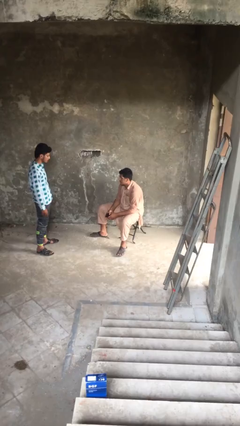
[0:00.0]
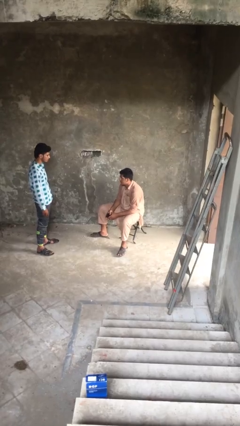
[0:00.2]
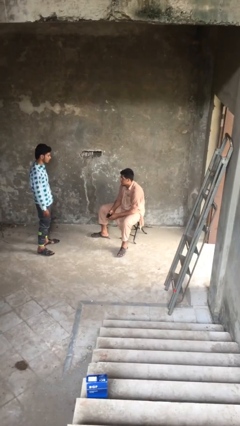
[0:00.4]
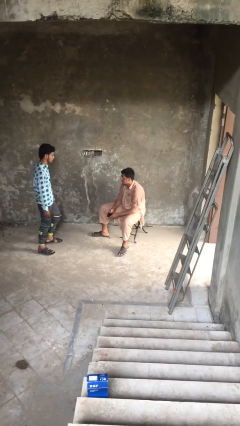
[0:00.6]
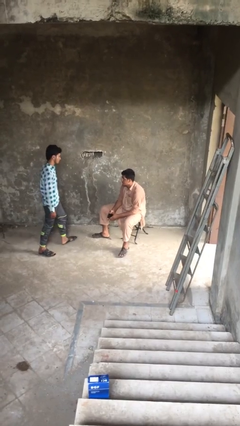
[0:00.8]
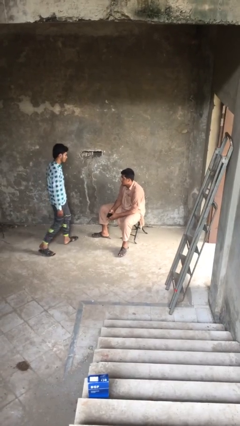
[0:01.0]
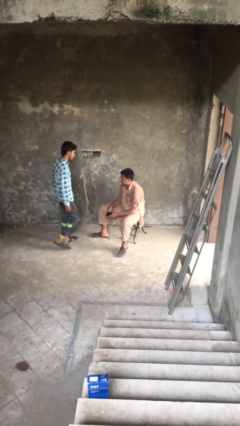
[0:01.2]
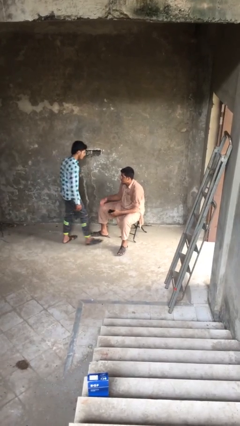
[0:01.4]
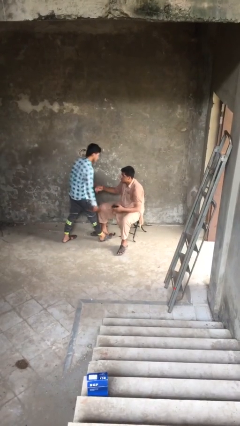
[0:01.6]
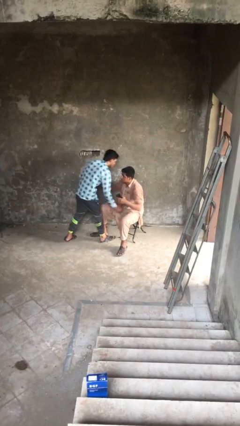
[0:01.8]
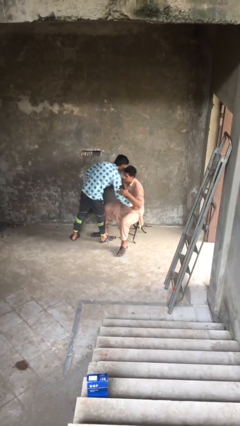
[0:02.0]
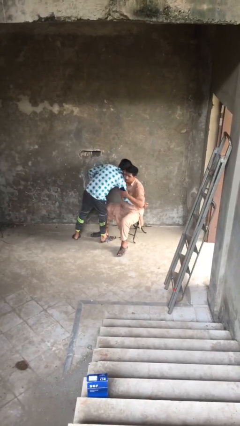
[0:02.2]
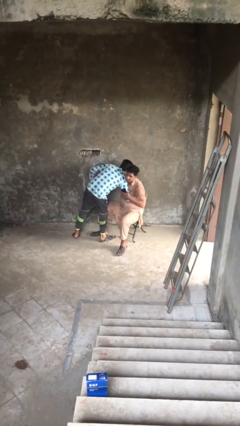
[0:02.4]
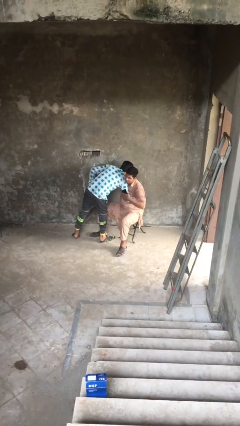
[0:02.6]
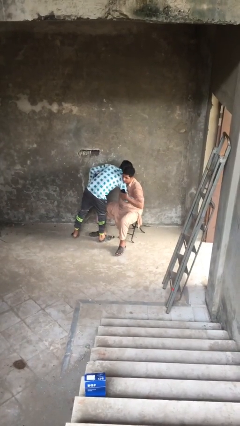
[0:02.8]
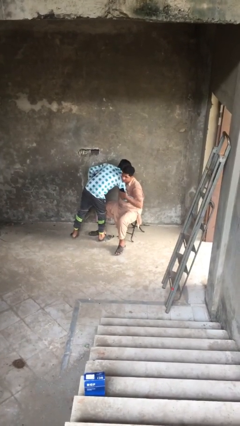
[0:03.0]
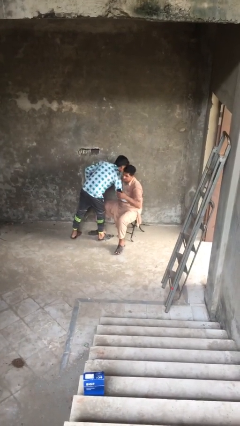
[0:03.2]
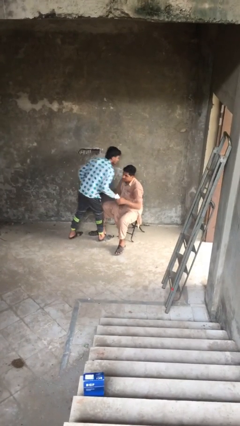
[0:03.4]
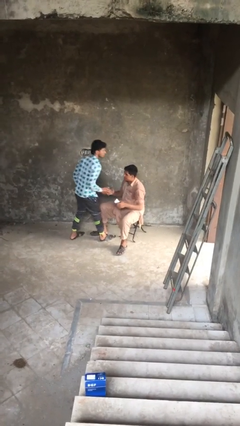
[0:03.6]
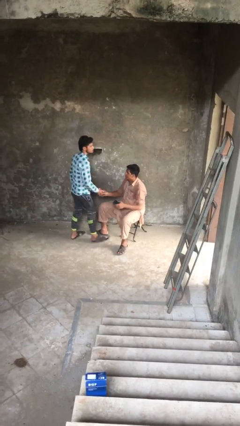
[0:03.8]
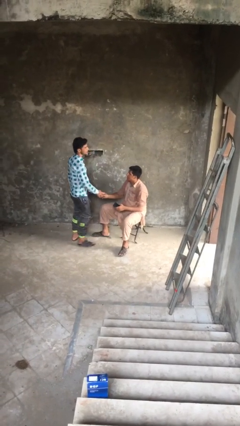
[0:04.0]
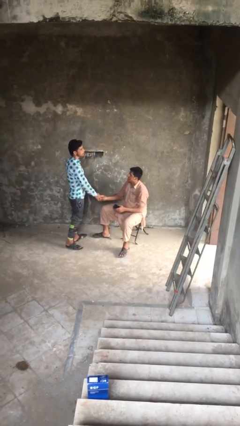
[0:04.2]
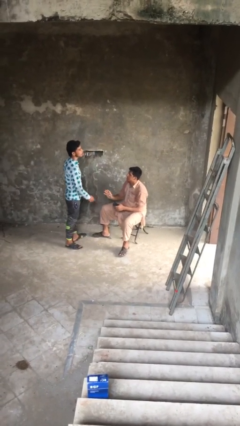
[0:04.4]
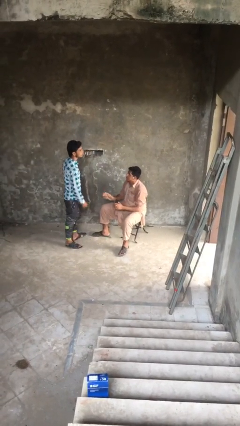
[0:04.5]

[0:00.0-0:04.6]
person embraces person

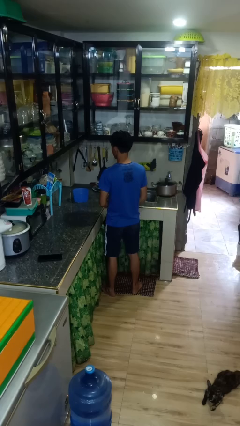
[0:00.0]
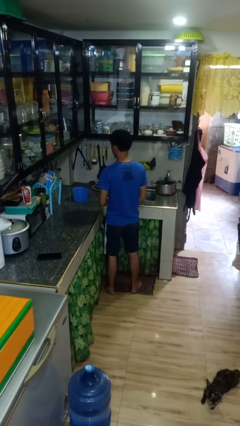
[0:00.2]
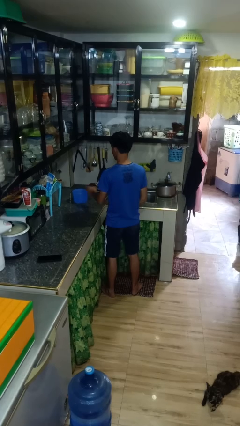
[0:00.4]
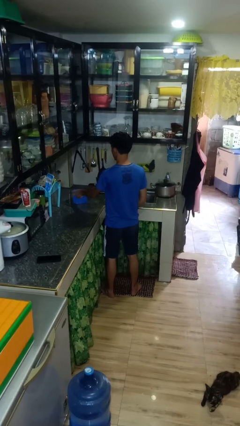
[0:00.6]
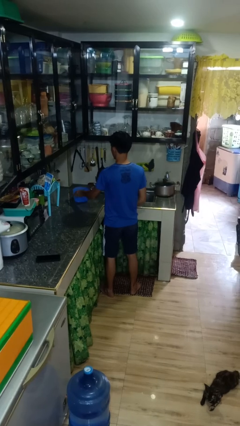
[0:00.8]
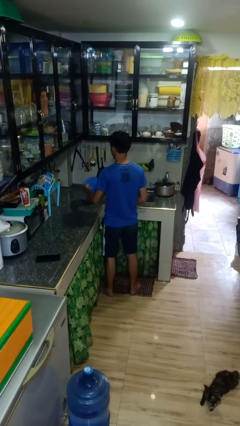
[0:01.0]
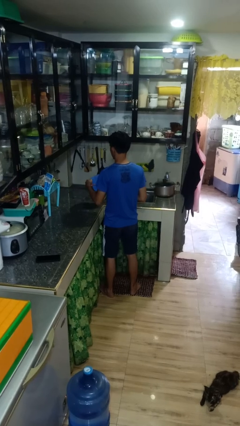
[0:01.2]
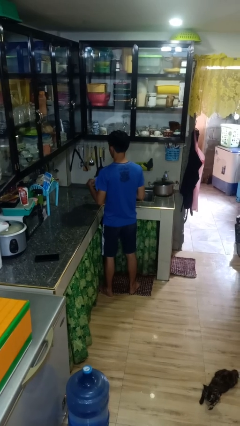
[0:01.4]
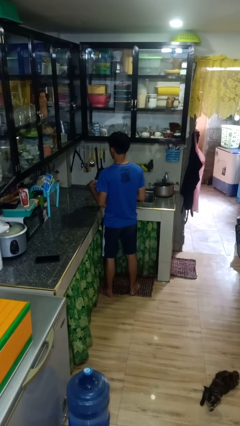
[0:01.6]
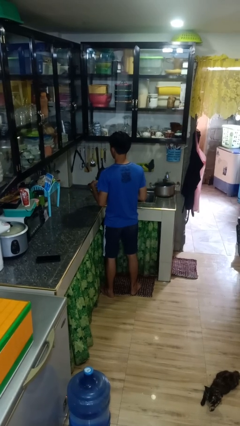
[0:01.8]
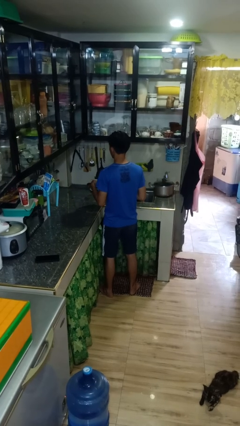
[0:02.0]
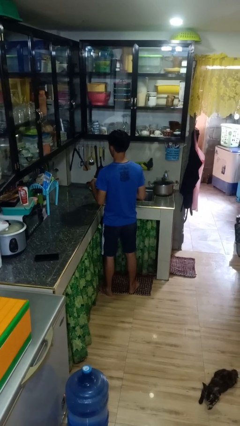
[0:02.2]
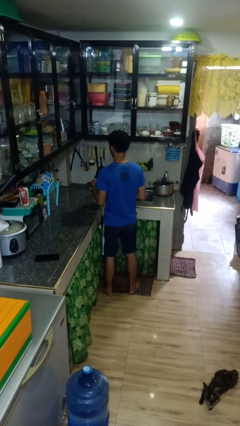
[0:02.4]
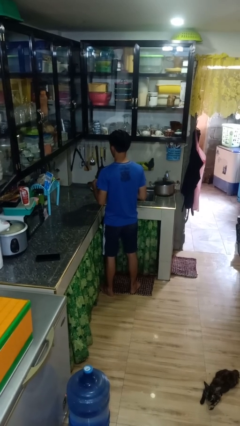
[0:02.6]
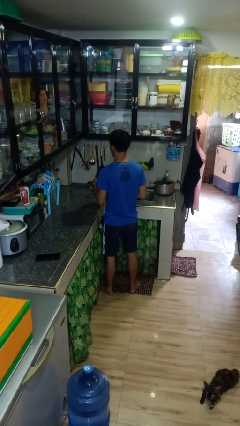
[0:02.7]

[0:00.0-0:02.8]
person picks up object from countertop

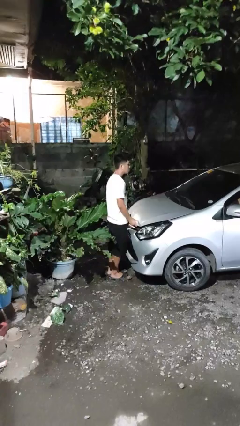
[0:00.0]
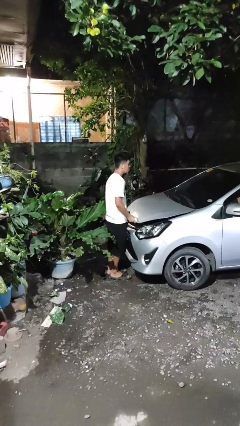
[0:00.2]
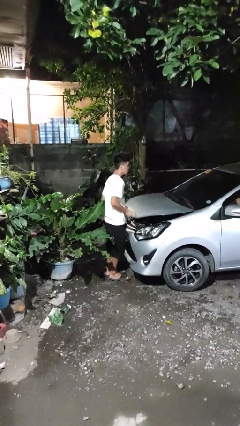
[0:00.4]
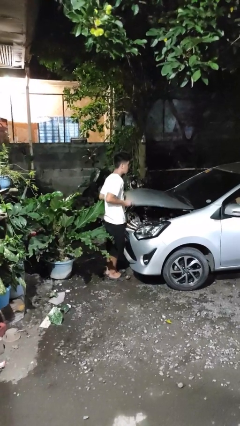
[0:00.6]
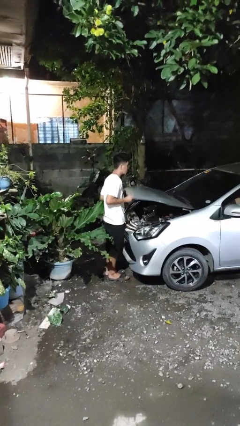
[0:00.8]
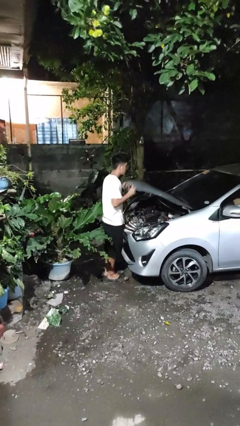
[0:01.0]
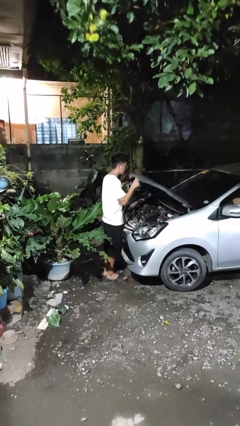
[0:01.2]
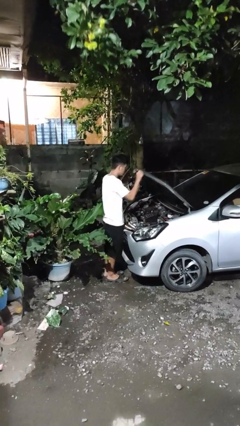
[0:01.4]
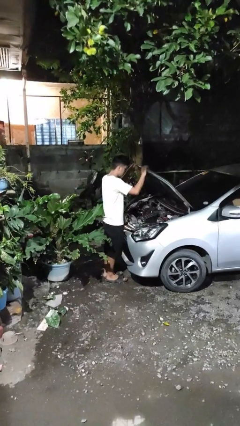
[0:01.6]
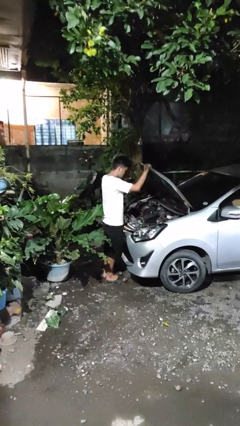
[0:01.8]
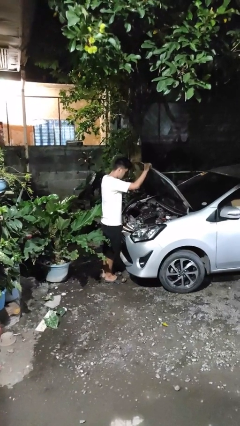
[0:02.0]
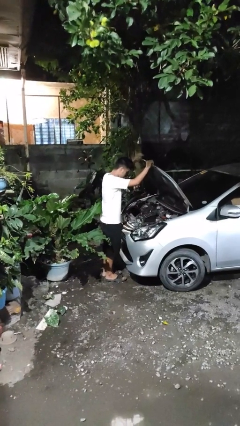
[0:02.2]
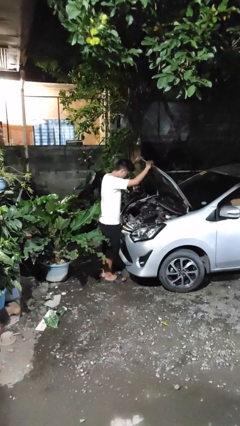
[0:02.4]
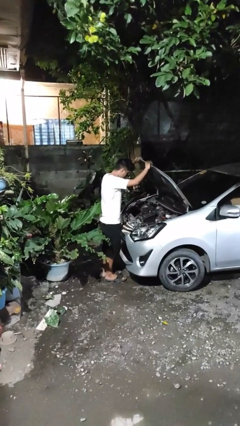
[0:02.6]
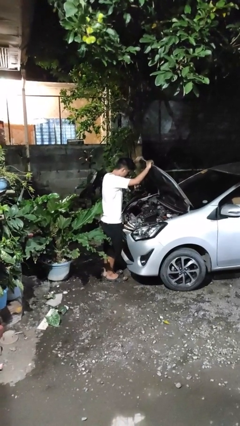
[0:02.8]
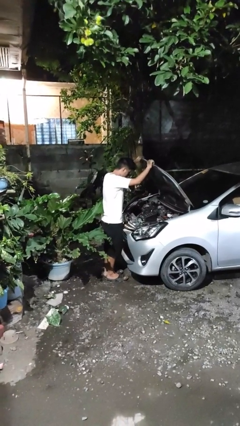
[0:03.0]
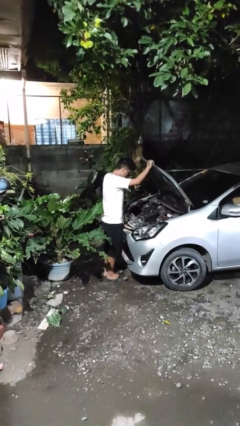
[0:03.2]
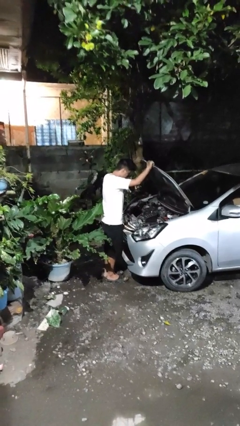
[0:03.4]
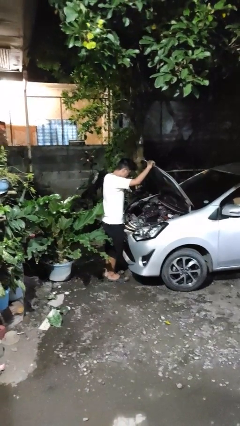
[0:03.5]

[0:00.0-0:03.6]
person opens car hood

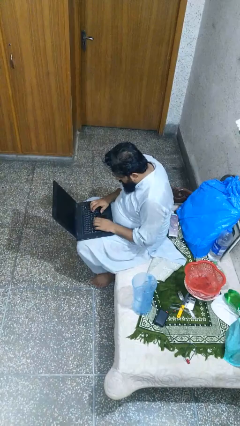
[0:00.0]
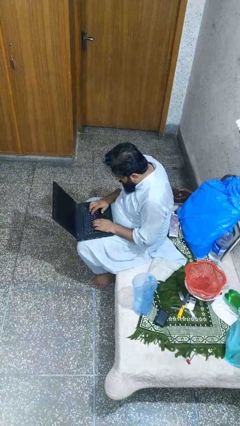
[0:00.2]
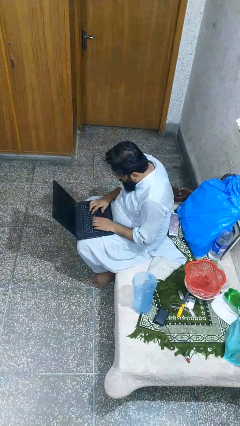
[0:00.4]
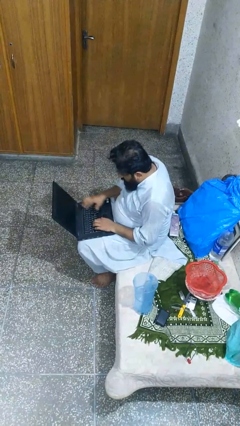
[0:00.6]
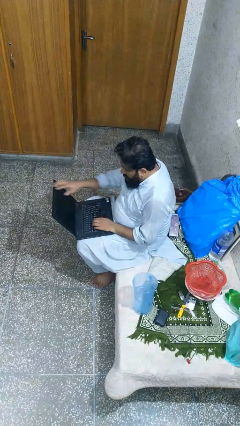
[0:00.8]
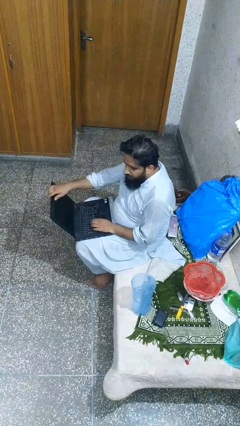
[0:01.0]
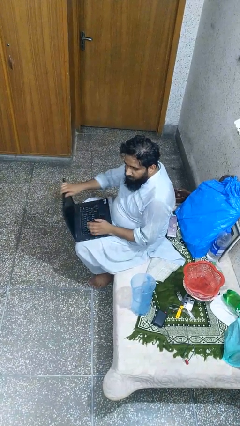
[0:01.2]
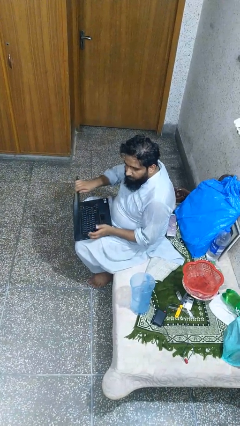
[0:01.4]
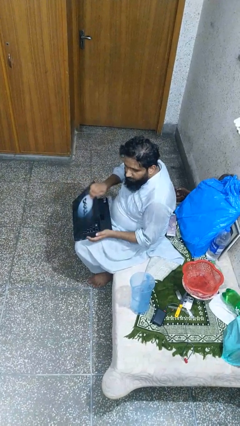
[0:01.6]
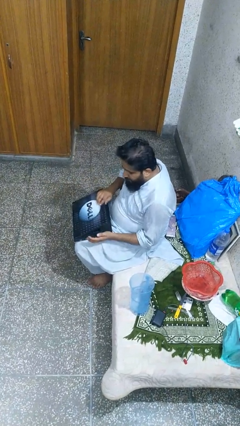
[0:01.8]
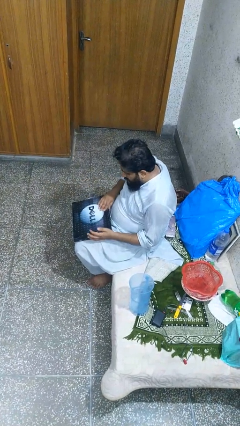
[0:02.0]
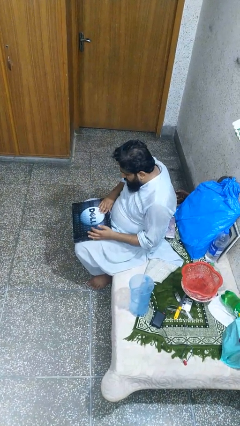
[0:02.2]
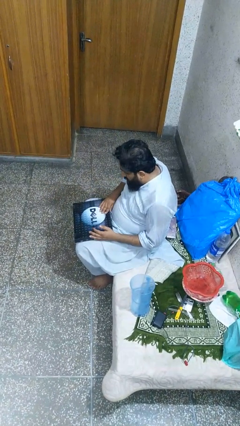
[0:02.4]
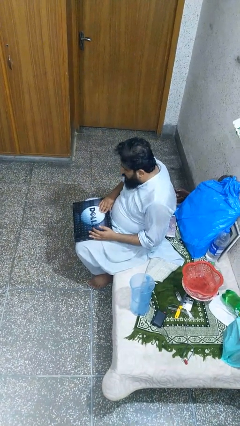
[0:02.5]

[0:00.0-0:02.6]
person closes laptop

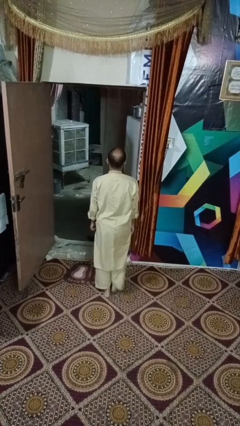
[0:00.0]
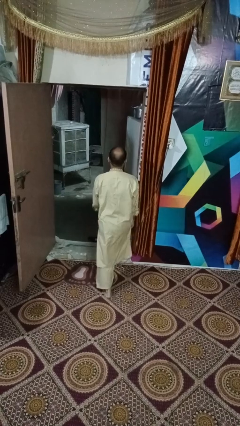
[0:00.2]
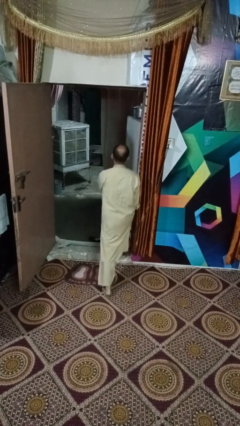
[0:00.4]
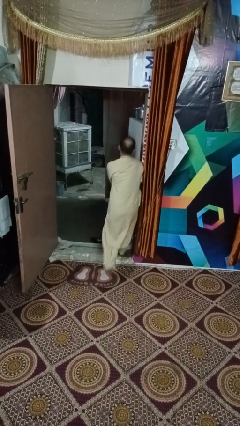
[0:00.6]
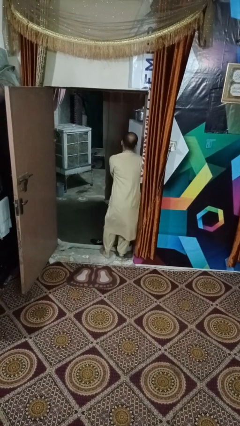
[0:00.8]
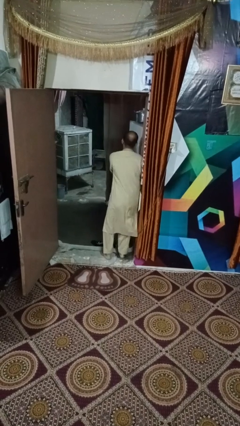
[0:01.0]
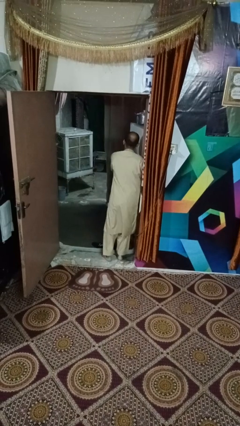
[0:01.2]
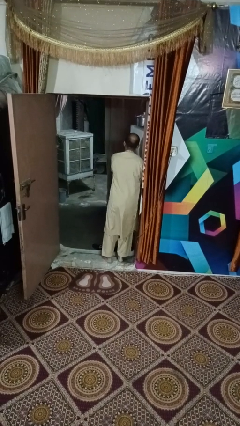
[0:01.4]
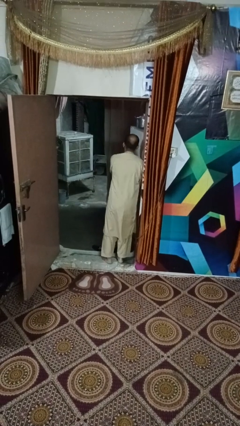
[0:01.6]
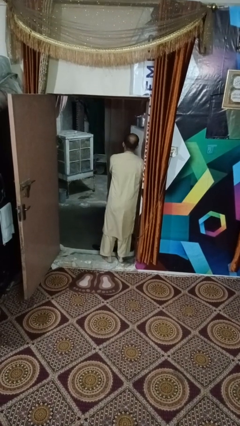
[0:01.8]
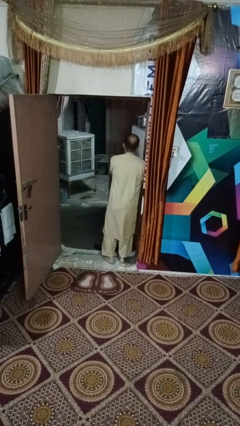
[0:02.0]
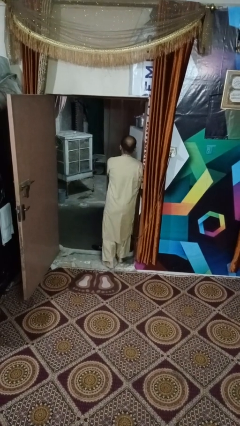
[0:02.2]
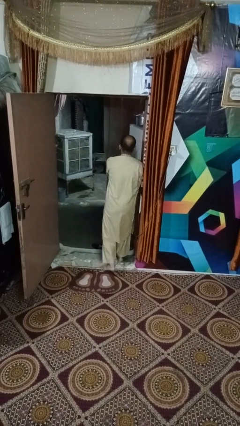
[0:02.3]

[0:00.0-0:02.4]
person bumps into wall

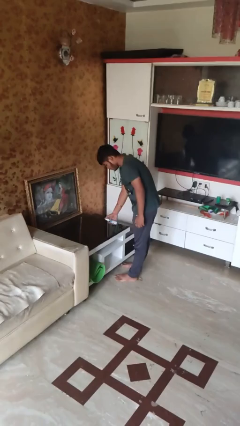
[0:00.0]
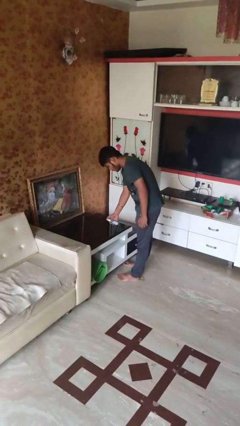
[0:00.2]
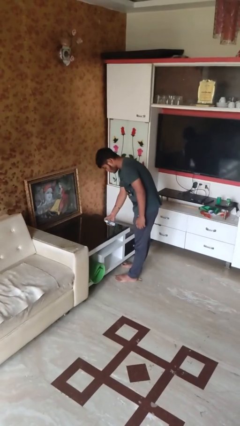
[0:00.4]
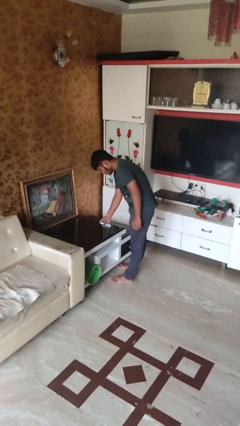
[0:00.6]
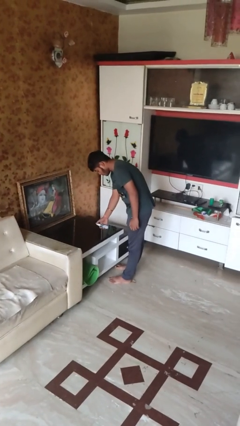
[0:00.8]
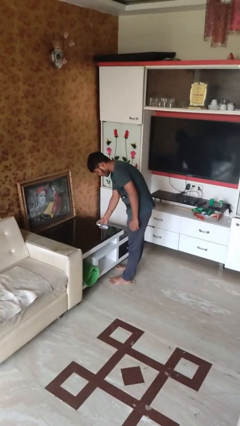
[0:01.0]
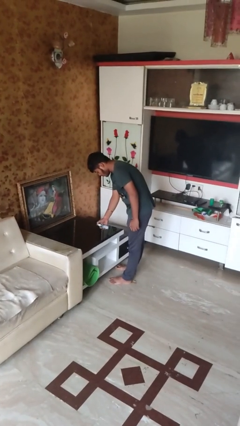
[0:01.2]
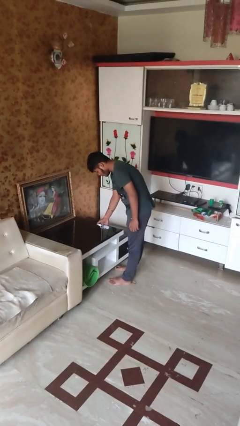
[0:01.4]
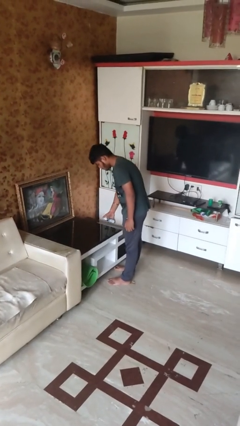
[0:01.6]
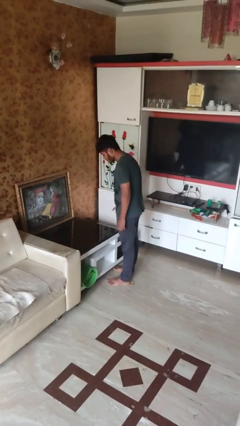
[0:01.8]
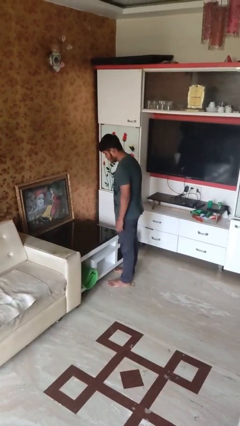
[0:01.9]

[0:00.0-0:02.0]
person sprays from bottle
